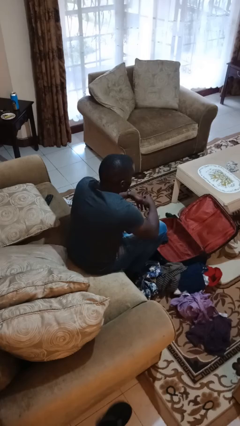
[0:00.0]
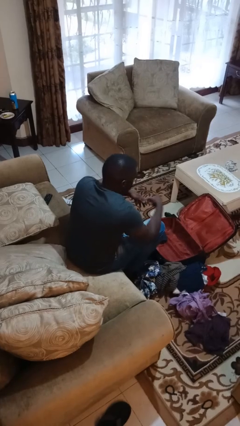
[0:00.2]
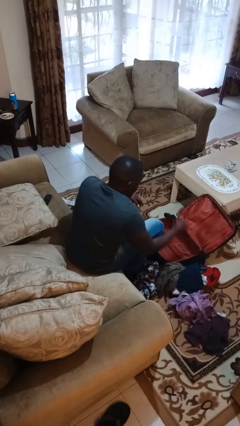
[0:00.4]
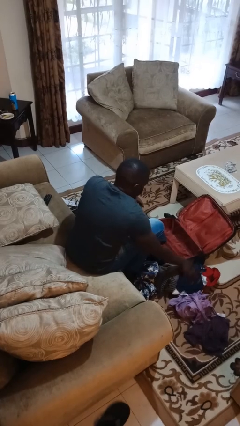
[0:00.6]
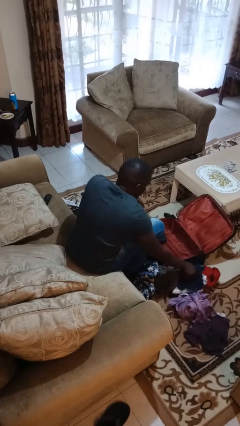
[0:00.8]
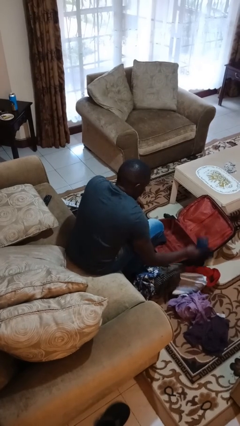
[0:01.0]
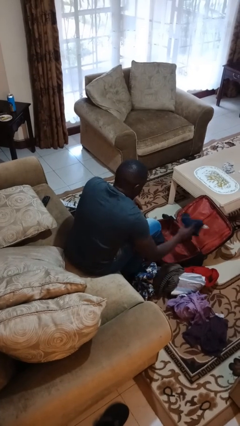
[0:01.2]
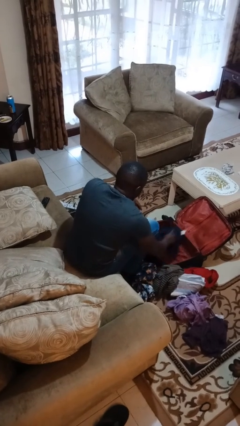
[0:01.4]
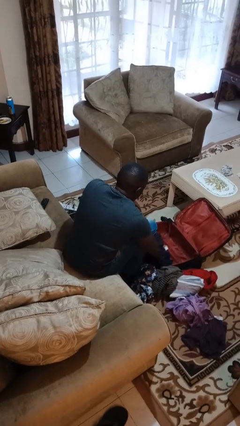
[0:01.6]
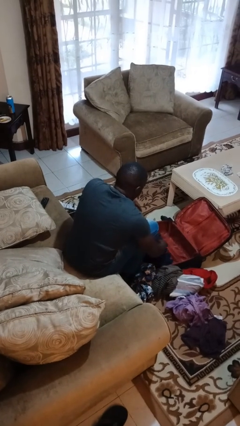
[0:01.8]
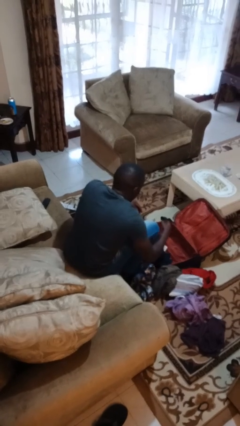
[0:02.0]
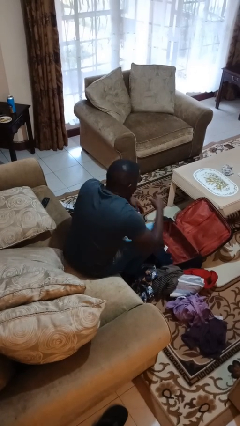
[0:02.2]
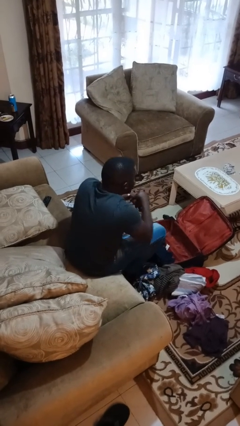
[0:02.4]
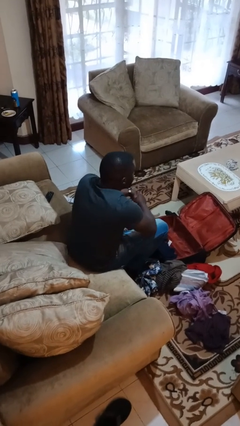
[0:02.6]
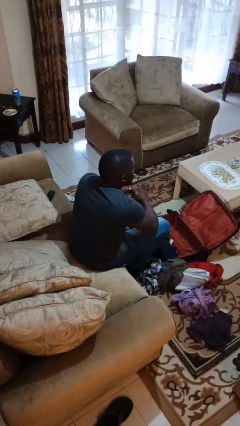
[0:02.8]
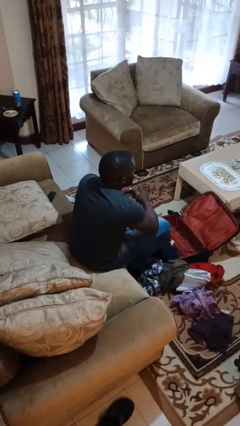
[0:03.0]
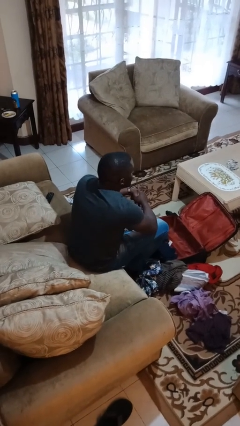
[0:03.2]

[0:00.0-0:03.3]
person loads clothes into suitcase

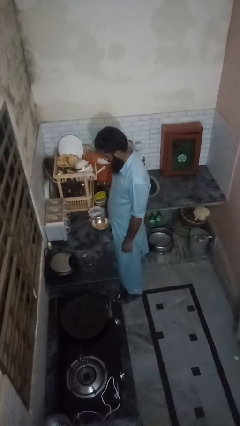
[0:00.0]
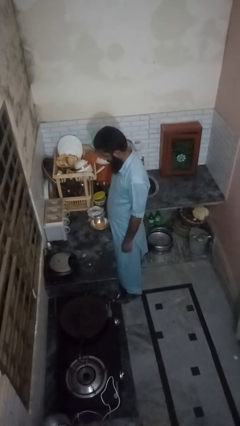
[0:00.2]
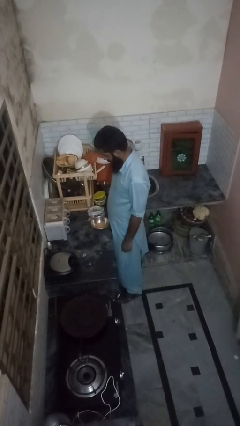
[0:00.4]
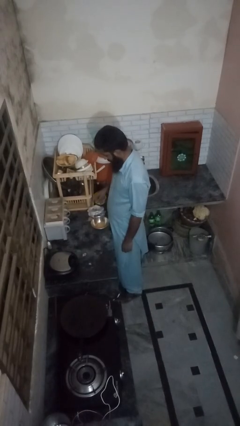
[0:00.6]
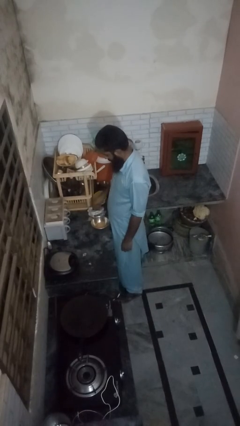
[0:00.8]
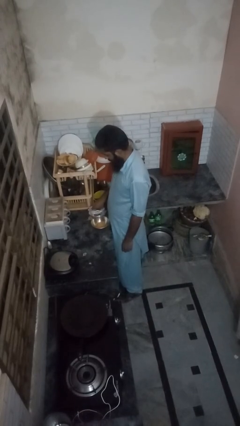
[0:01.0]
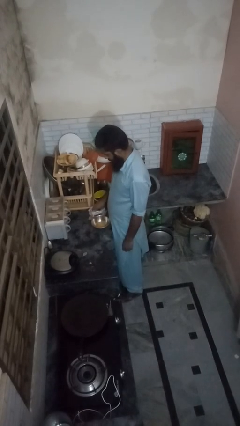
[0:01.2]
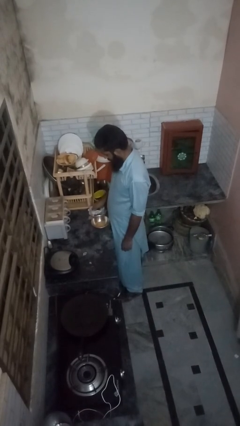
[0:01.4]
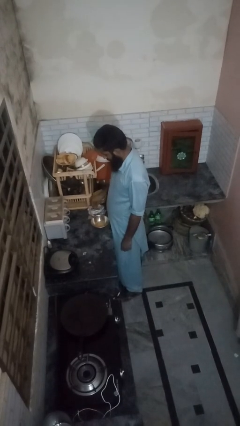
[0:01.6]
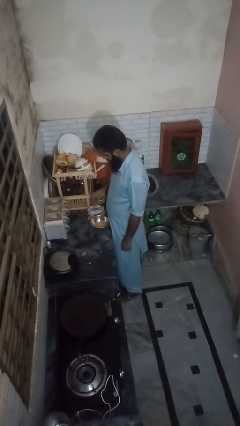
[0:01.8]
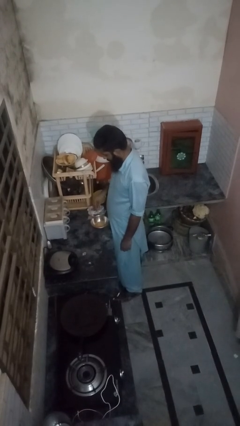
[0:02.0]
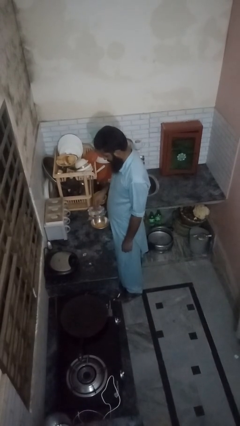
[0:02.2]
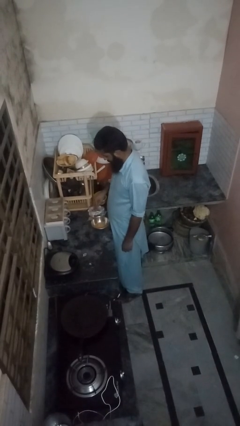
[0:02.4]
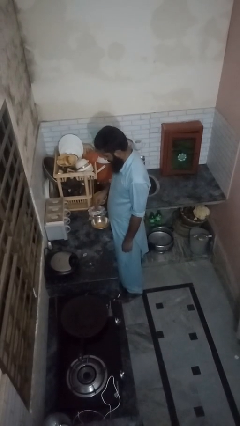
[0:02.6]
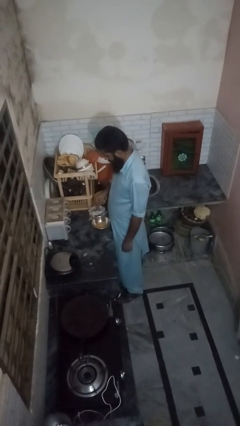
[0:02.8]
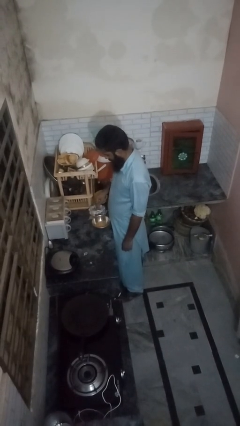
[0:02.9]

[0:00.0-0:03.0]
person pours into bowl

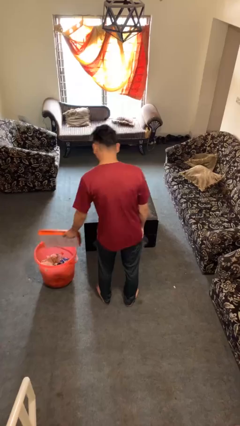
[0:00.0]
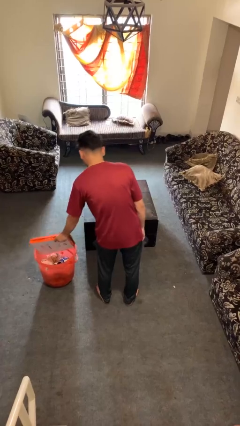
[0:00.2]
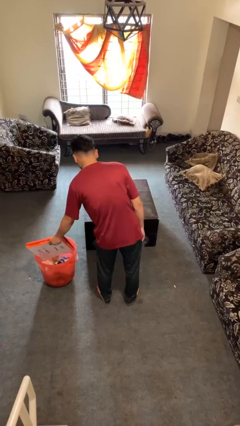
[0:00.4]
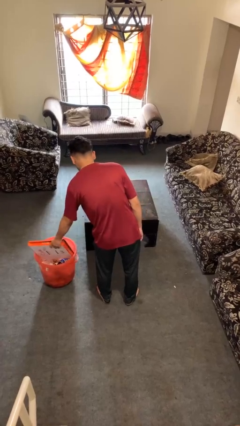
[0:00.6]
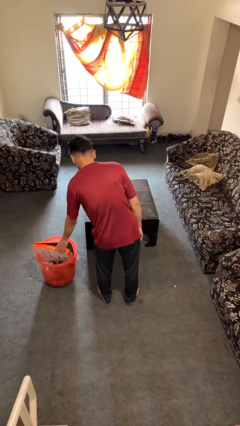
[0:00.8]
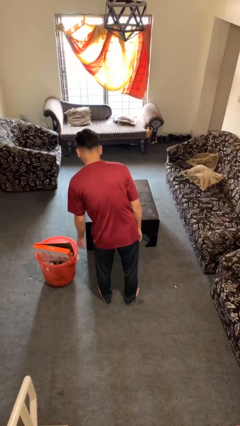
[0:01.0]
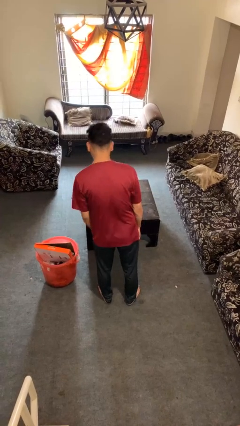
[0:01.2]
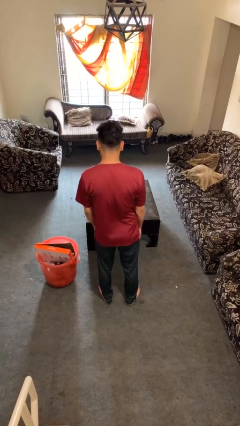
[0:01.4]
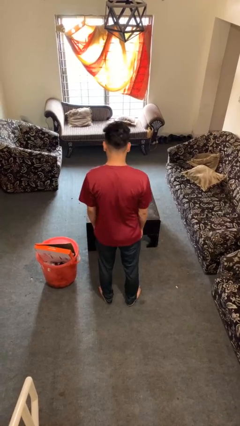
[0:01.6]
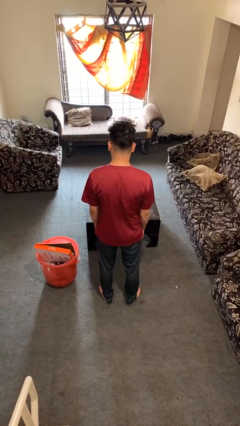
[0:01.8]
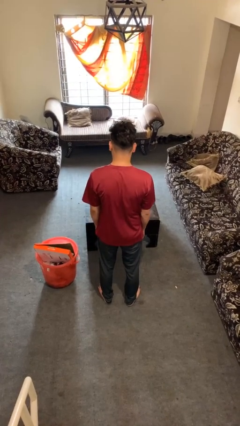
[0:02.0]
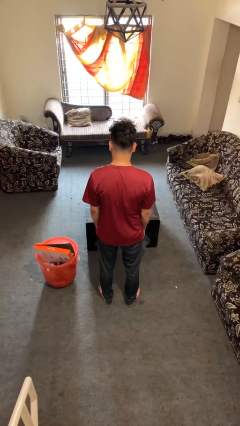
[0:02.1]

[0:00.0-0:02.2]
person puts object into basket

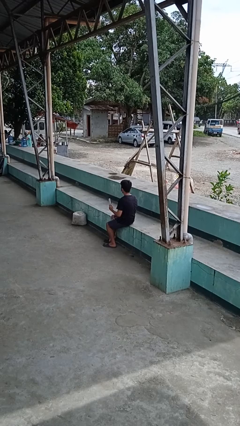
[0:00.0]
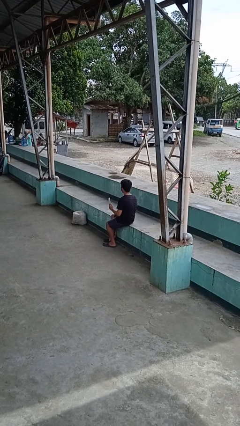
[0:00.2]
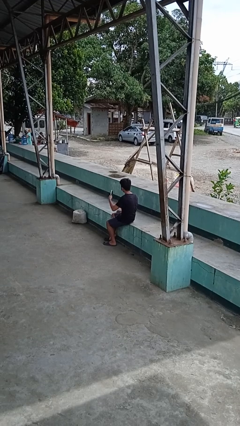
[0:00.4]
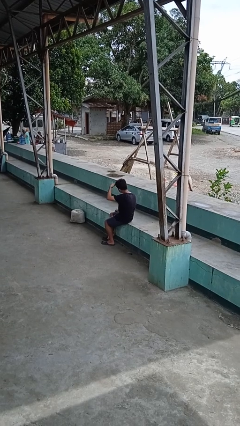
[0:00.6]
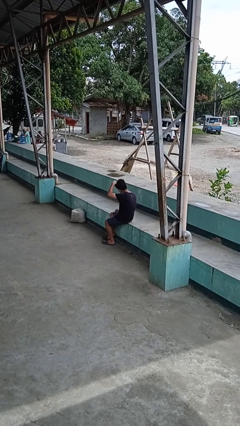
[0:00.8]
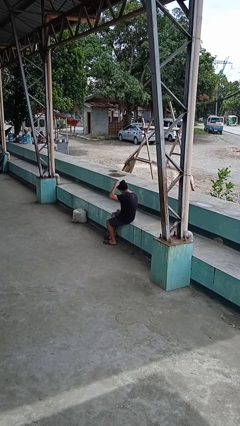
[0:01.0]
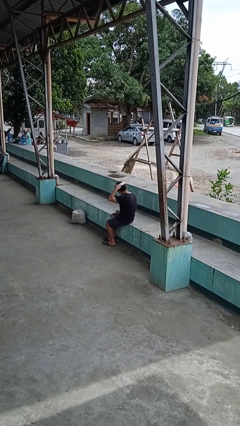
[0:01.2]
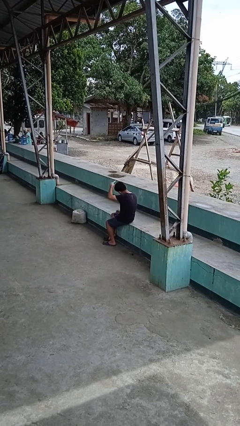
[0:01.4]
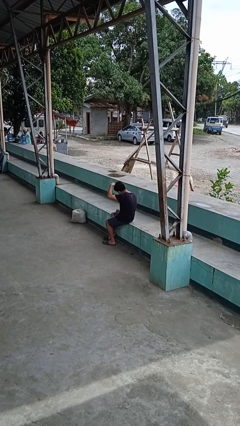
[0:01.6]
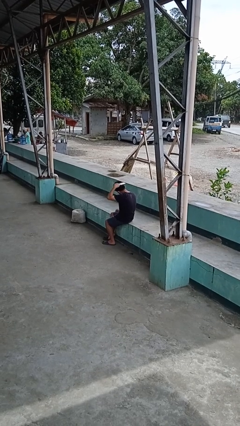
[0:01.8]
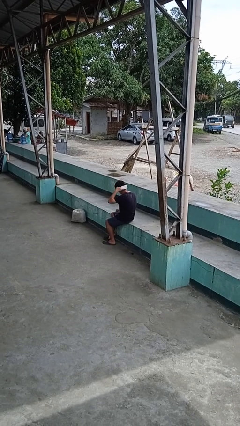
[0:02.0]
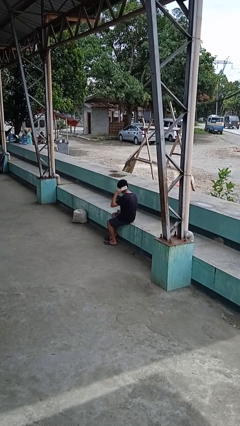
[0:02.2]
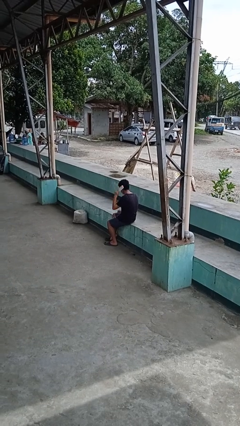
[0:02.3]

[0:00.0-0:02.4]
person brushes hair

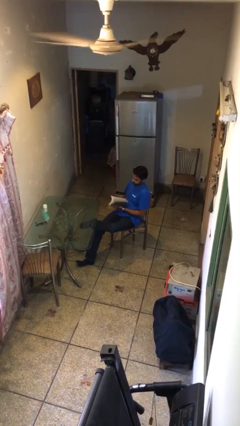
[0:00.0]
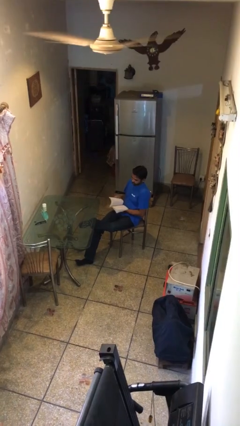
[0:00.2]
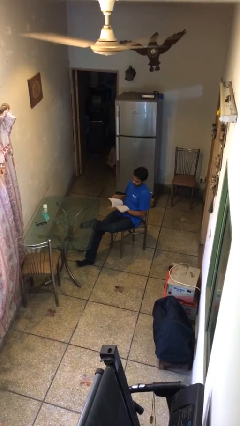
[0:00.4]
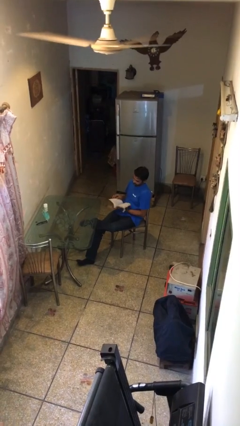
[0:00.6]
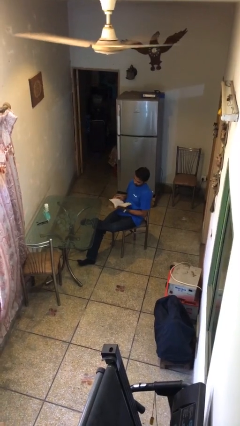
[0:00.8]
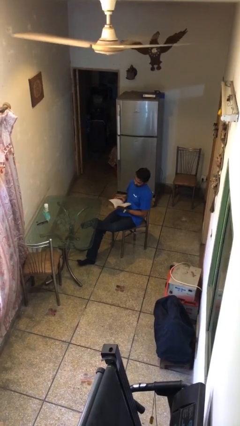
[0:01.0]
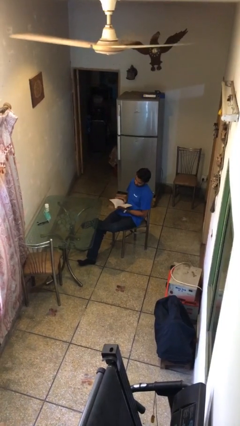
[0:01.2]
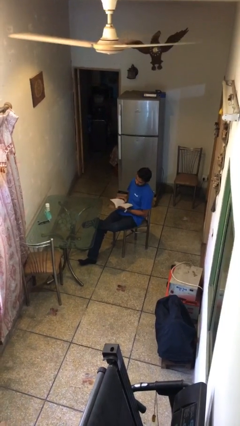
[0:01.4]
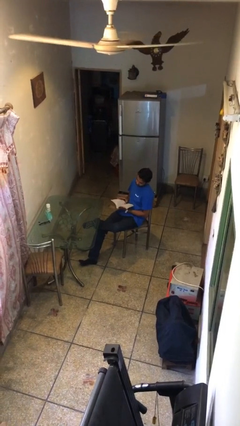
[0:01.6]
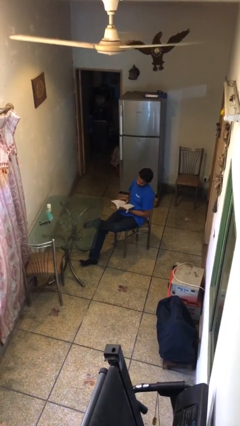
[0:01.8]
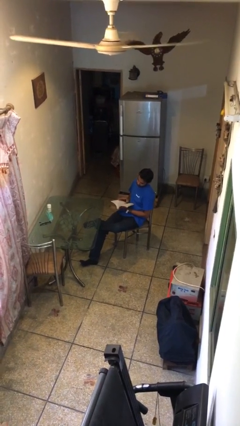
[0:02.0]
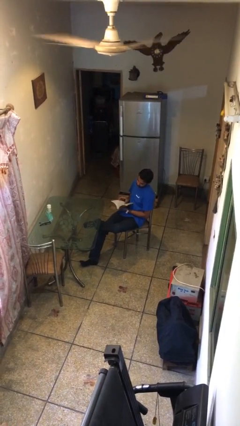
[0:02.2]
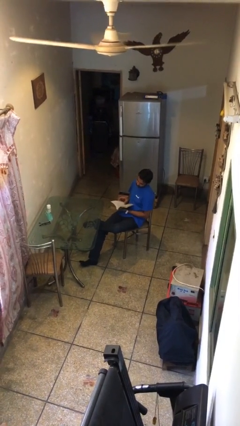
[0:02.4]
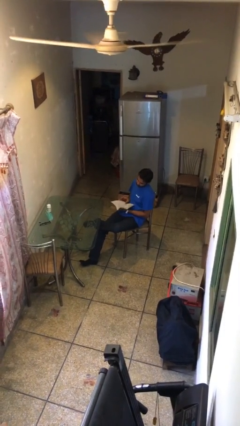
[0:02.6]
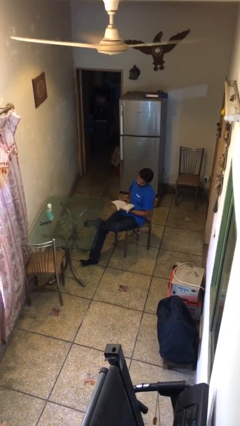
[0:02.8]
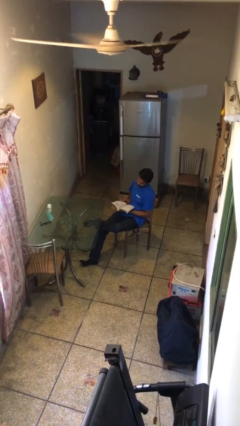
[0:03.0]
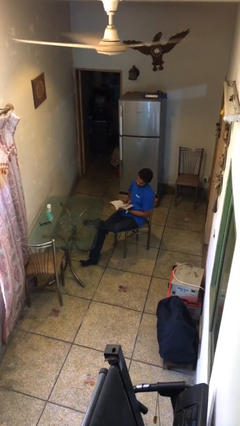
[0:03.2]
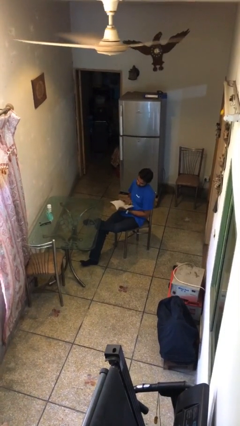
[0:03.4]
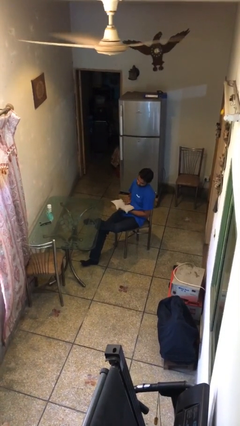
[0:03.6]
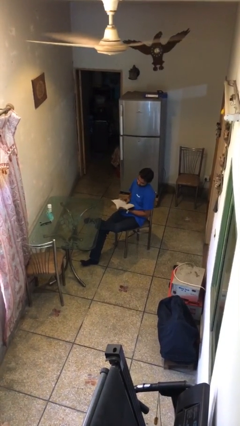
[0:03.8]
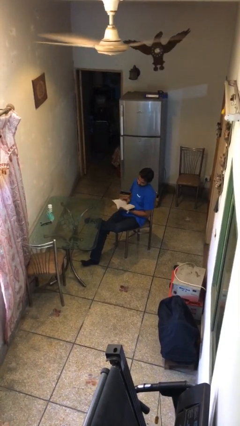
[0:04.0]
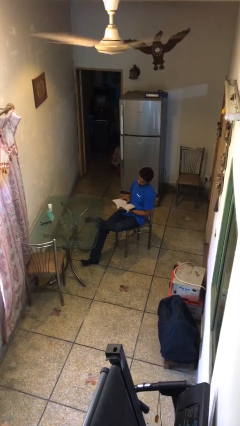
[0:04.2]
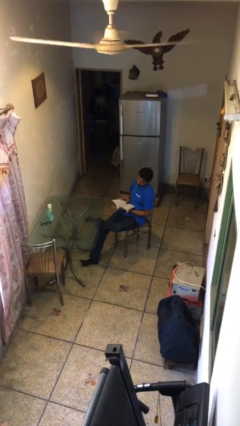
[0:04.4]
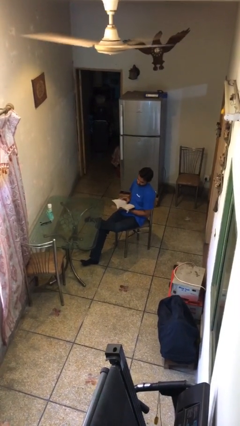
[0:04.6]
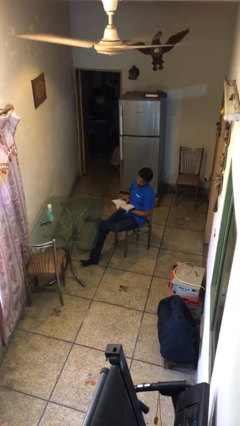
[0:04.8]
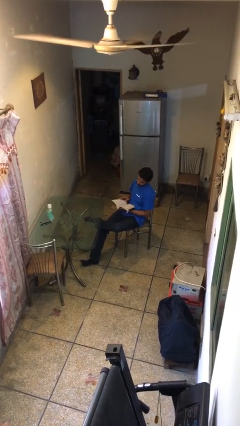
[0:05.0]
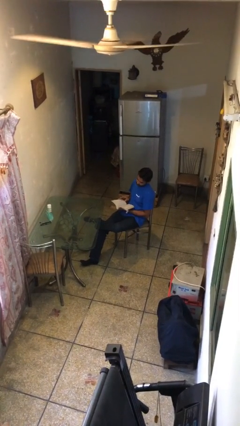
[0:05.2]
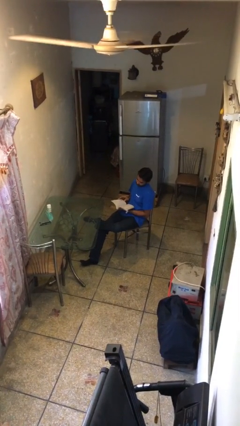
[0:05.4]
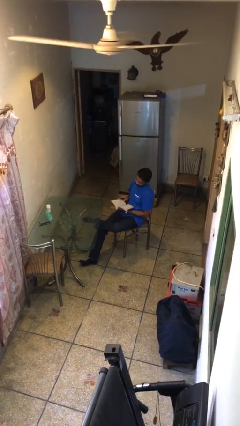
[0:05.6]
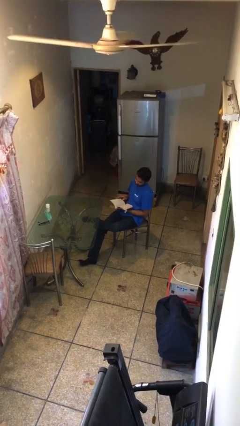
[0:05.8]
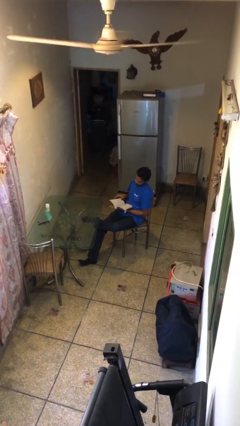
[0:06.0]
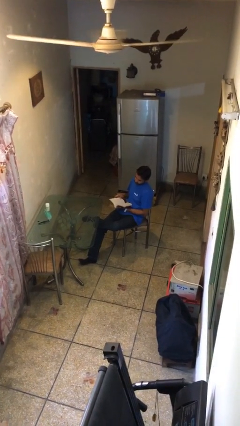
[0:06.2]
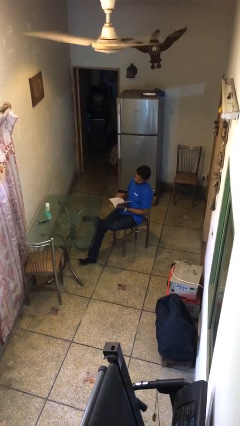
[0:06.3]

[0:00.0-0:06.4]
person reads document

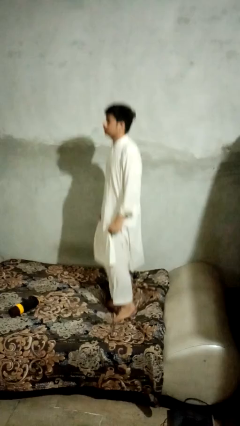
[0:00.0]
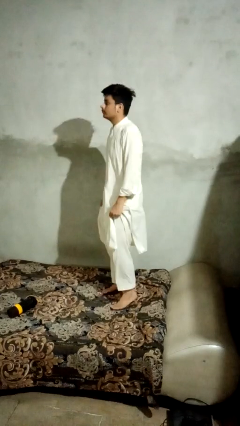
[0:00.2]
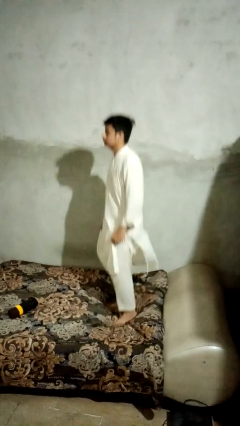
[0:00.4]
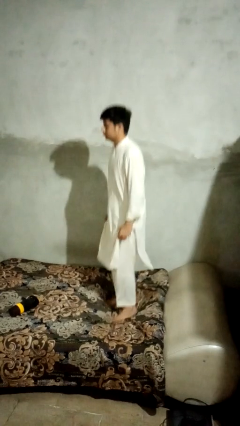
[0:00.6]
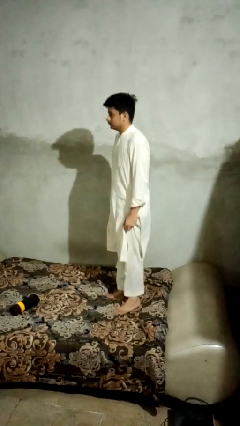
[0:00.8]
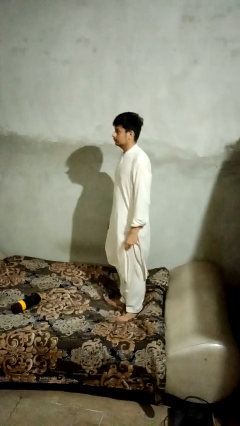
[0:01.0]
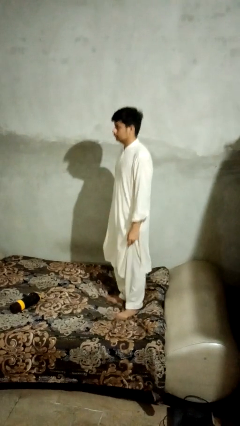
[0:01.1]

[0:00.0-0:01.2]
person jumps on bed
